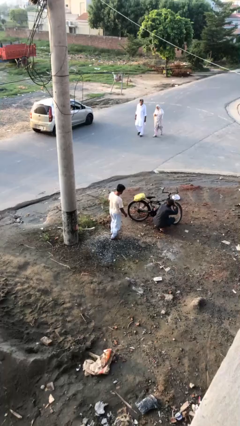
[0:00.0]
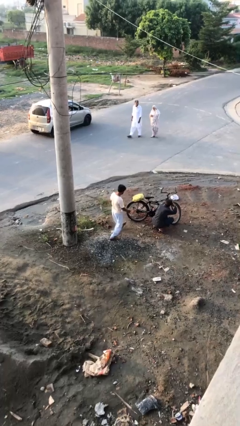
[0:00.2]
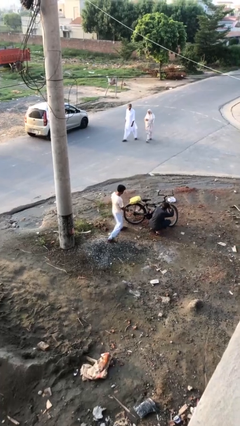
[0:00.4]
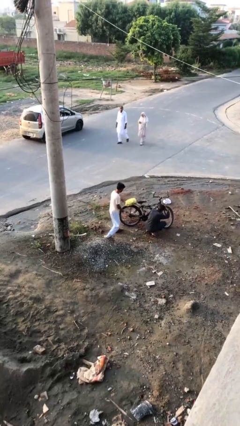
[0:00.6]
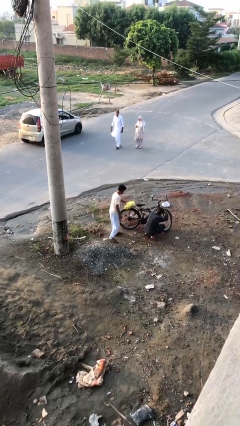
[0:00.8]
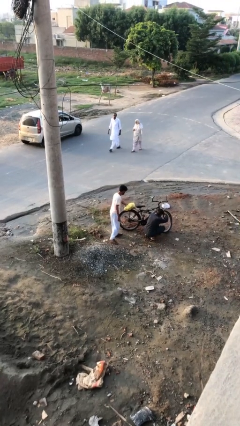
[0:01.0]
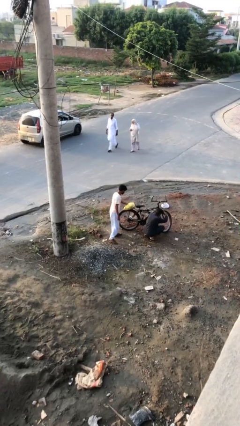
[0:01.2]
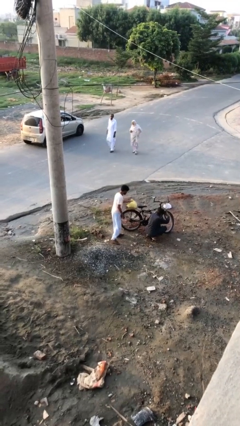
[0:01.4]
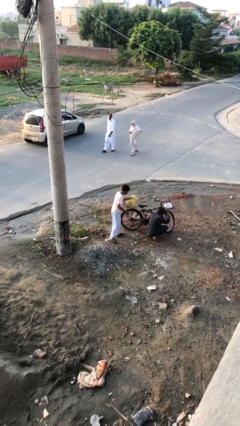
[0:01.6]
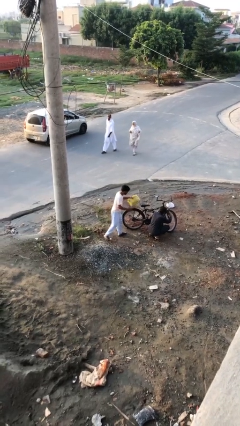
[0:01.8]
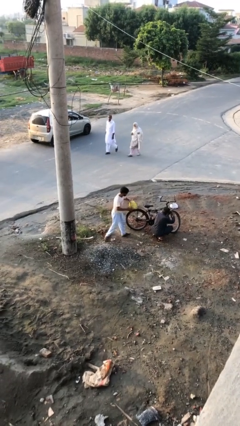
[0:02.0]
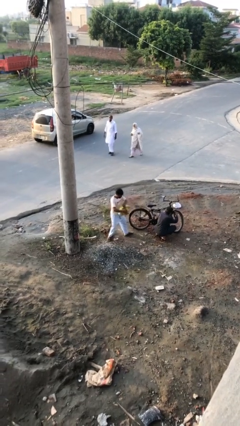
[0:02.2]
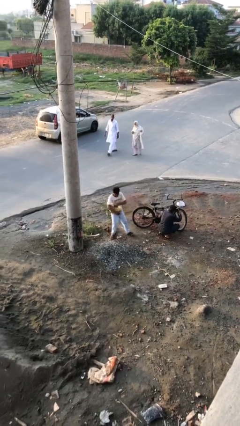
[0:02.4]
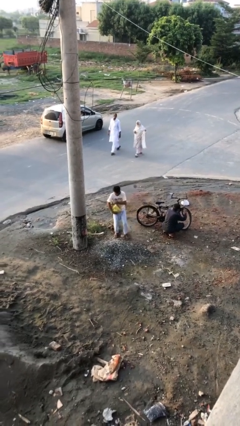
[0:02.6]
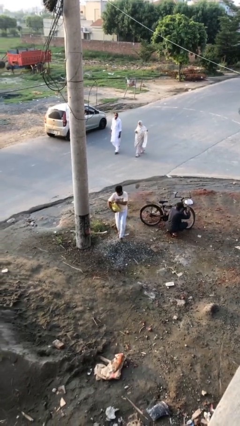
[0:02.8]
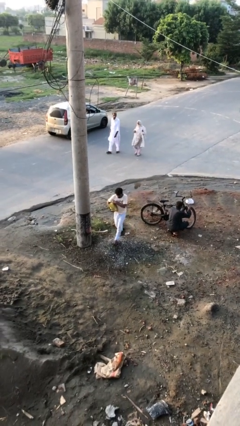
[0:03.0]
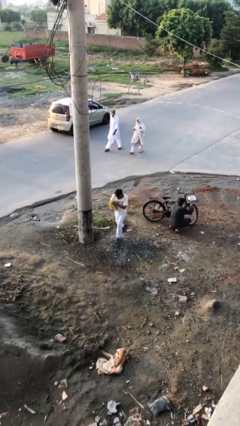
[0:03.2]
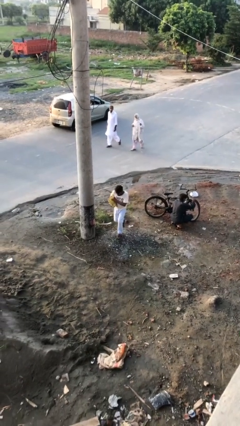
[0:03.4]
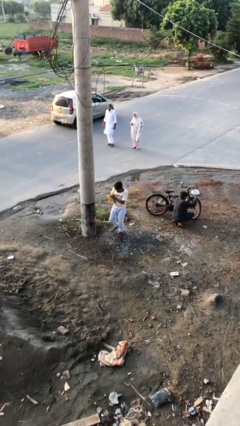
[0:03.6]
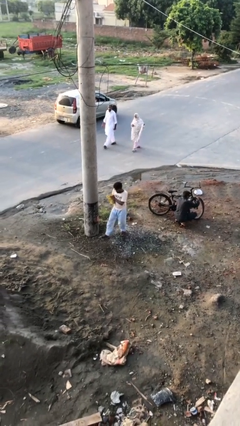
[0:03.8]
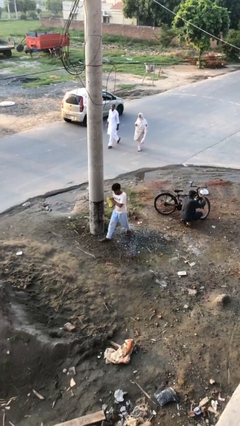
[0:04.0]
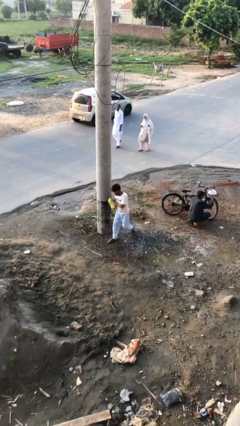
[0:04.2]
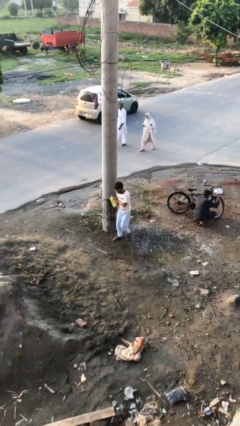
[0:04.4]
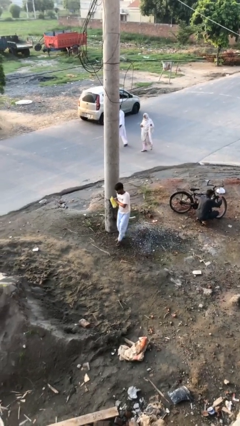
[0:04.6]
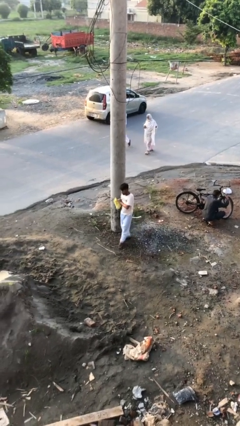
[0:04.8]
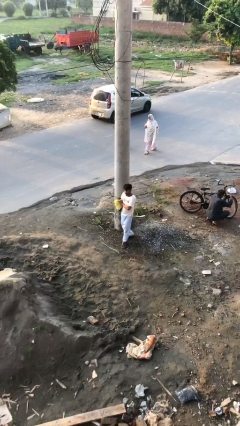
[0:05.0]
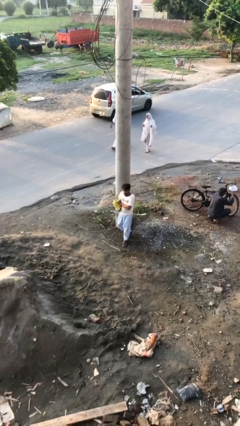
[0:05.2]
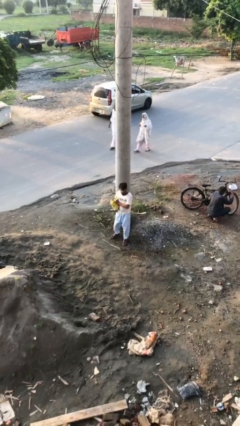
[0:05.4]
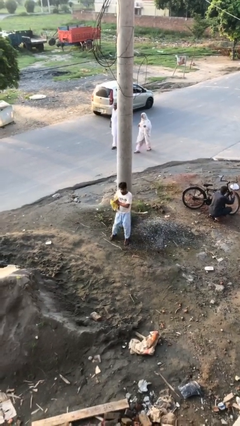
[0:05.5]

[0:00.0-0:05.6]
person steals object from person

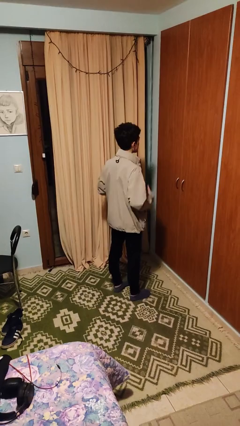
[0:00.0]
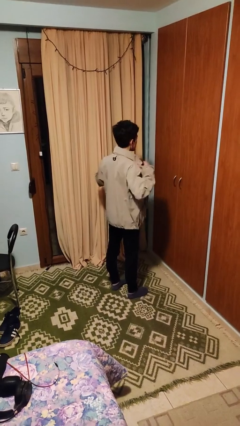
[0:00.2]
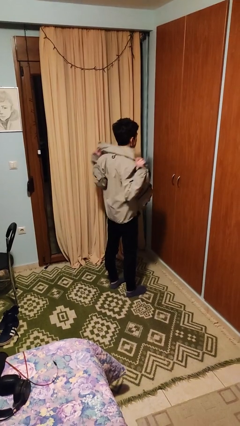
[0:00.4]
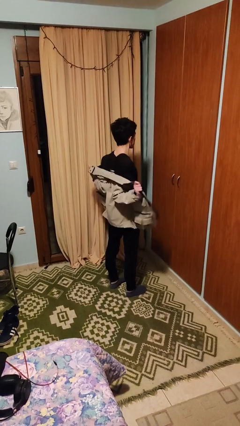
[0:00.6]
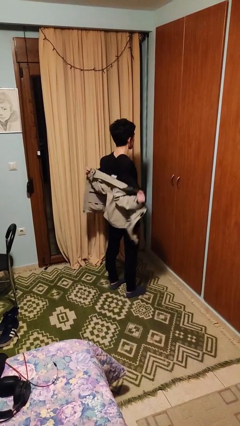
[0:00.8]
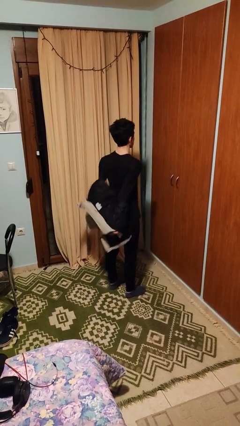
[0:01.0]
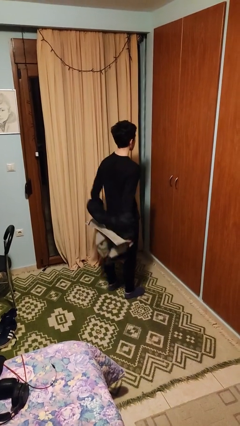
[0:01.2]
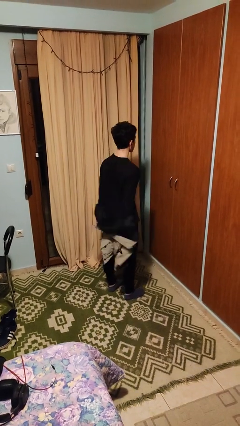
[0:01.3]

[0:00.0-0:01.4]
person takes off jacket

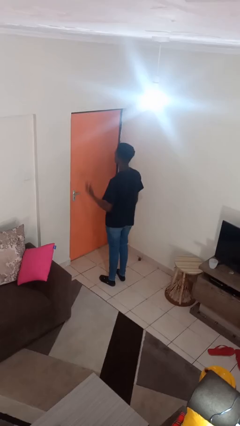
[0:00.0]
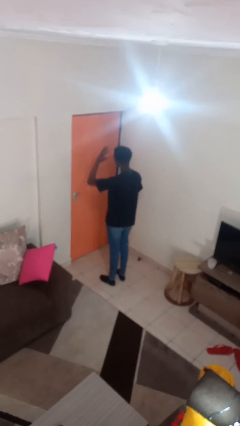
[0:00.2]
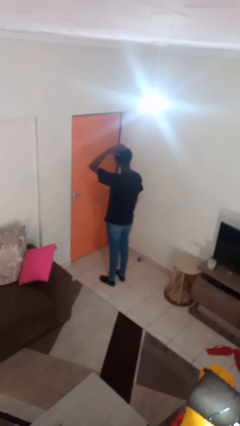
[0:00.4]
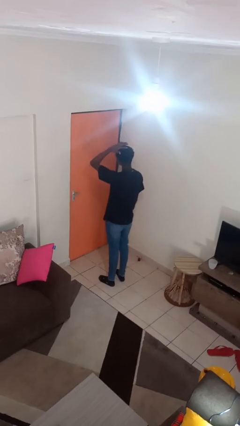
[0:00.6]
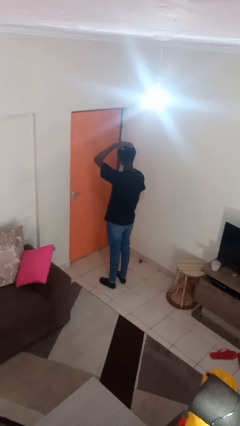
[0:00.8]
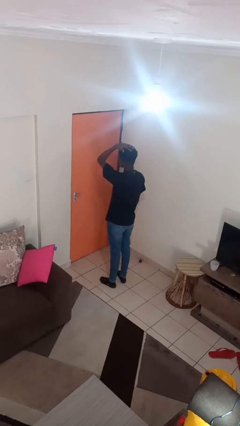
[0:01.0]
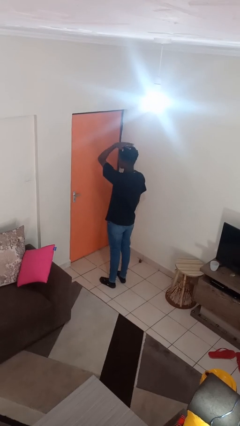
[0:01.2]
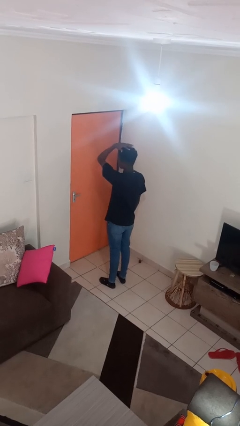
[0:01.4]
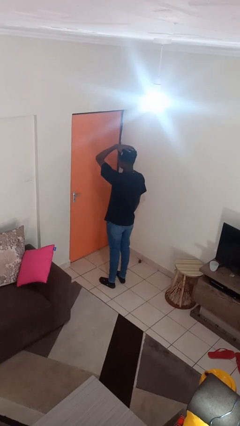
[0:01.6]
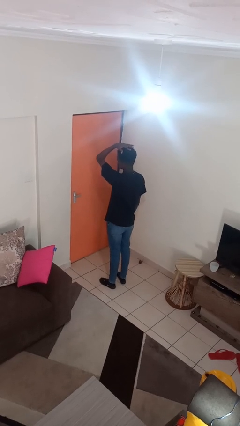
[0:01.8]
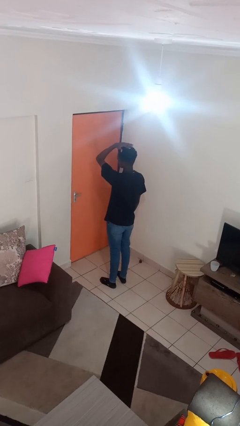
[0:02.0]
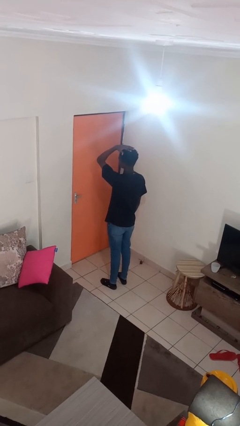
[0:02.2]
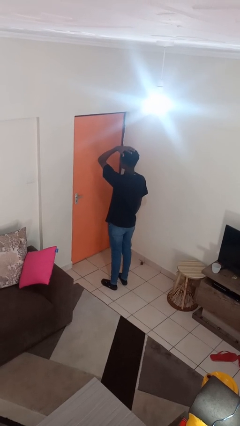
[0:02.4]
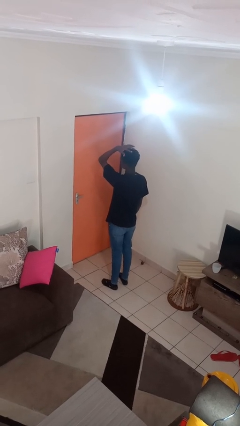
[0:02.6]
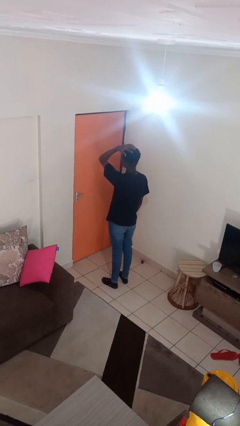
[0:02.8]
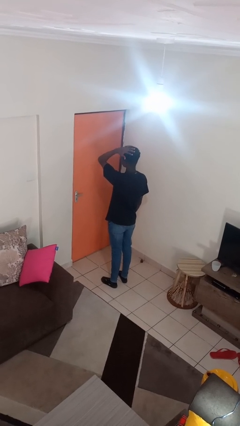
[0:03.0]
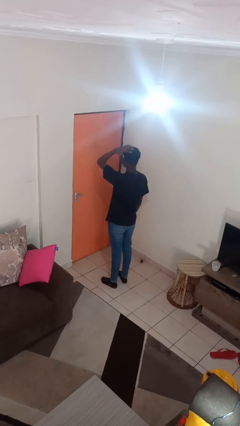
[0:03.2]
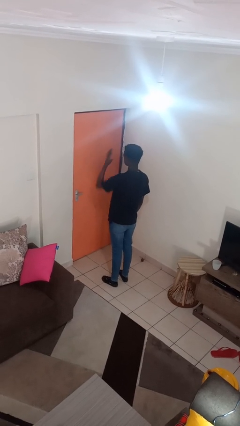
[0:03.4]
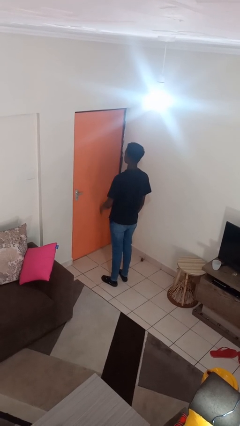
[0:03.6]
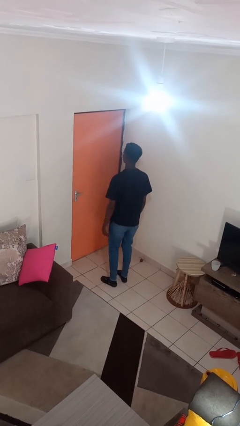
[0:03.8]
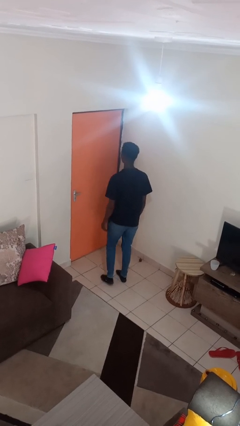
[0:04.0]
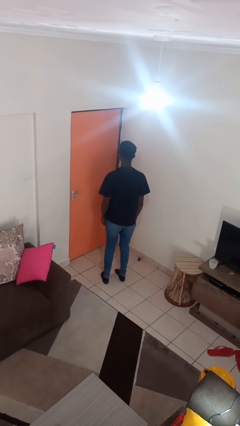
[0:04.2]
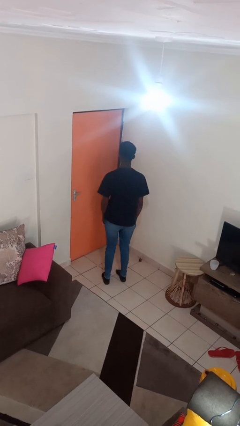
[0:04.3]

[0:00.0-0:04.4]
person pats head

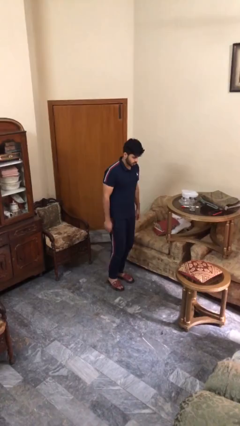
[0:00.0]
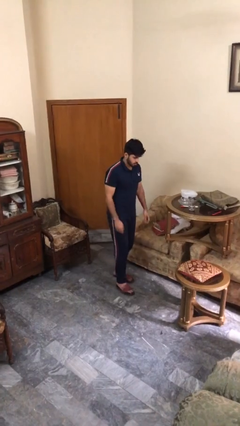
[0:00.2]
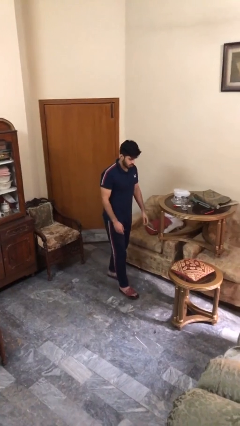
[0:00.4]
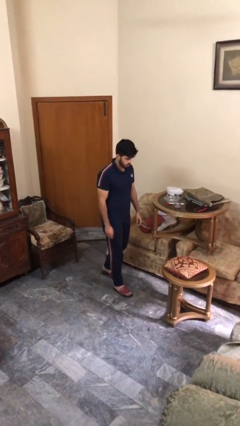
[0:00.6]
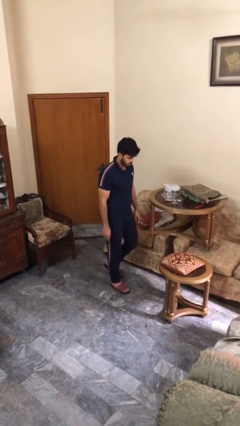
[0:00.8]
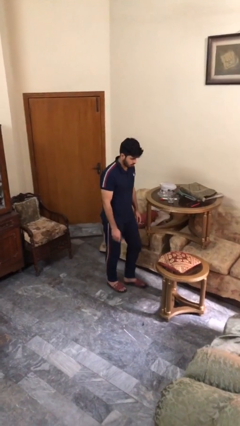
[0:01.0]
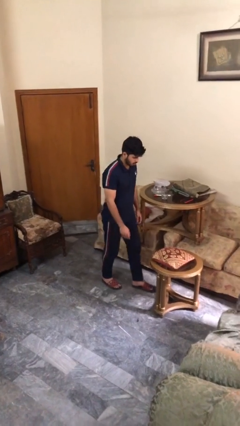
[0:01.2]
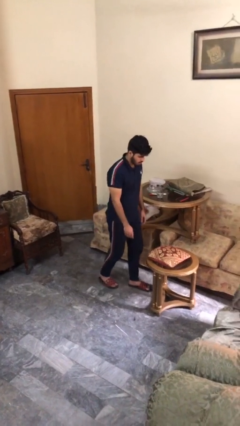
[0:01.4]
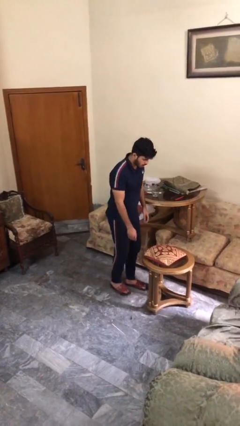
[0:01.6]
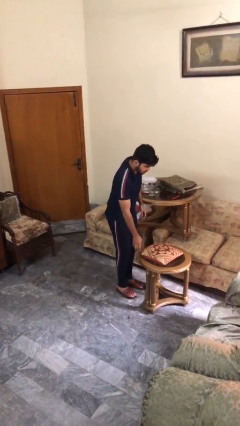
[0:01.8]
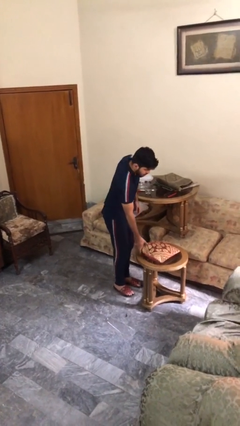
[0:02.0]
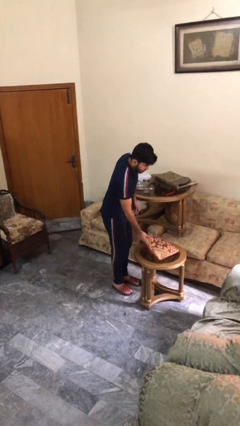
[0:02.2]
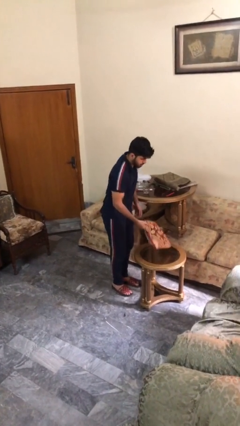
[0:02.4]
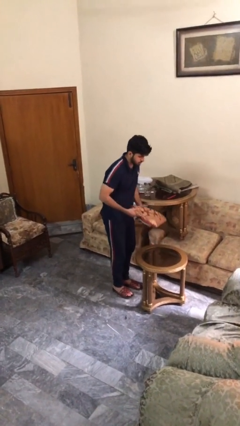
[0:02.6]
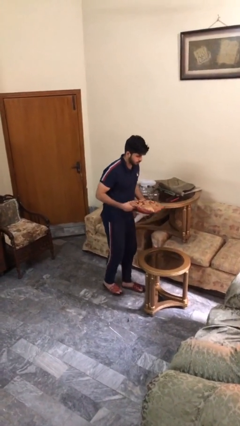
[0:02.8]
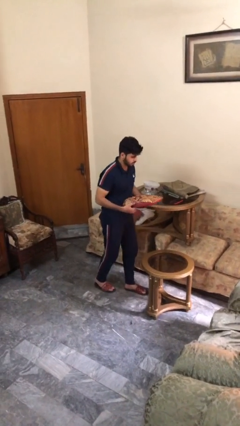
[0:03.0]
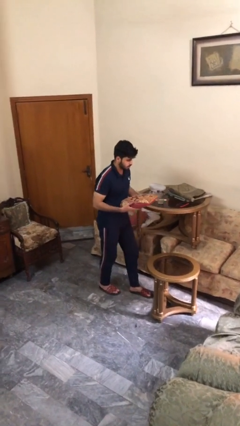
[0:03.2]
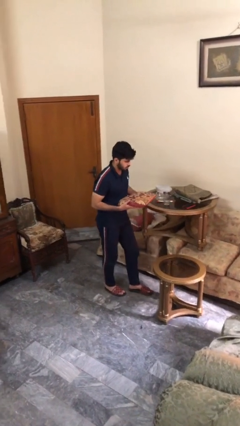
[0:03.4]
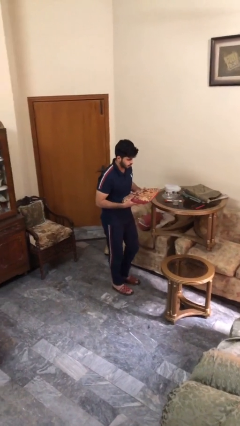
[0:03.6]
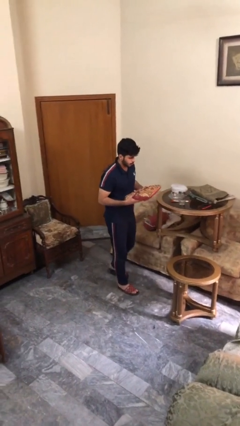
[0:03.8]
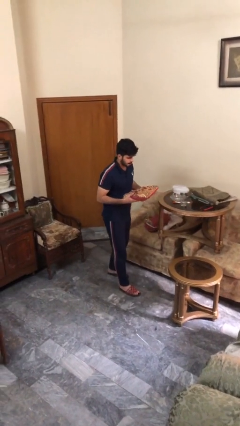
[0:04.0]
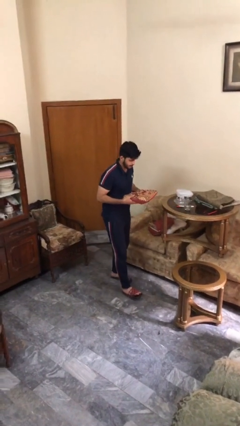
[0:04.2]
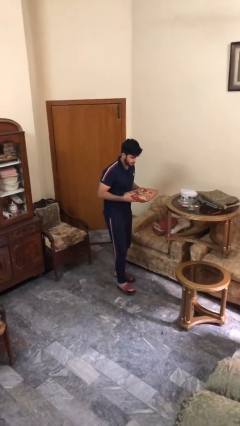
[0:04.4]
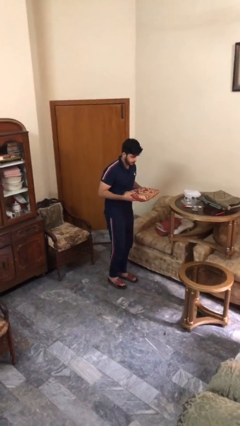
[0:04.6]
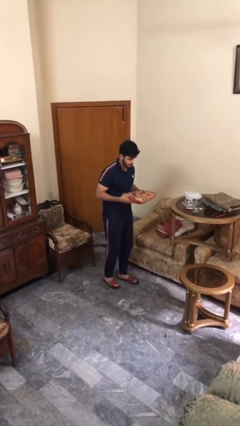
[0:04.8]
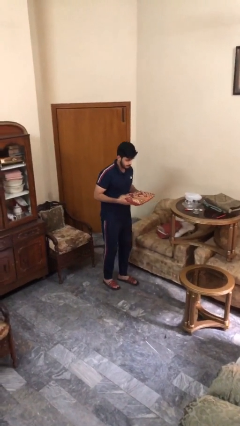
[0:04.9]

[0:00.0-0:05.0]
person picks up object from table

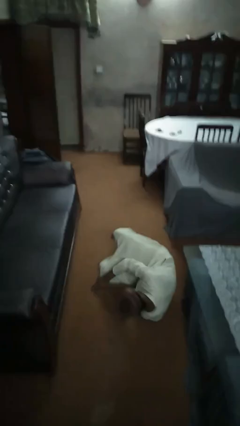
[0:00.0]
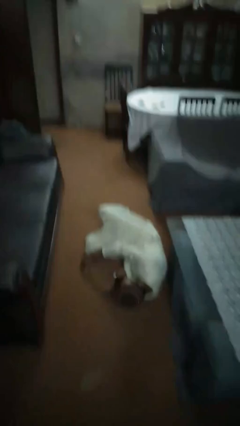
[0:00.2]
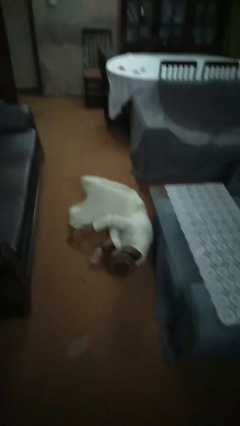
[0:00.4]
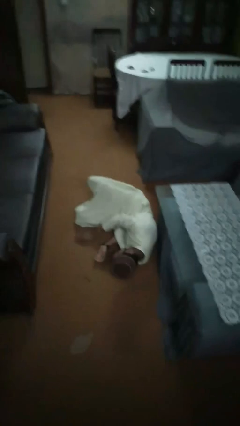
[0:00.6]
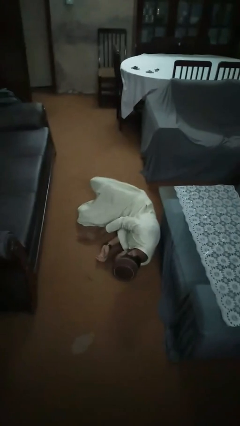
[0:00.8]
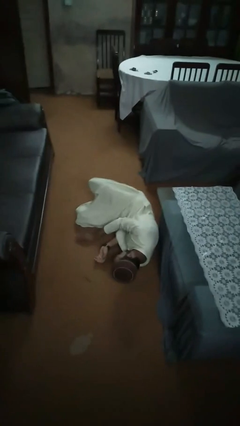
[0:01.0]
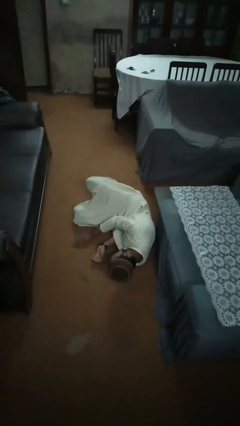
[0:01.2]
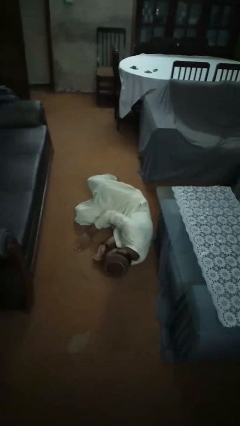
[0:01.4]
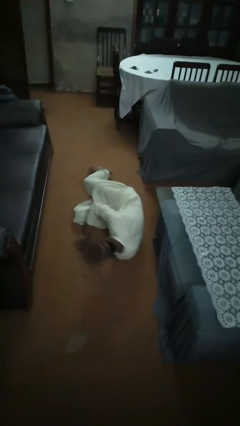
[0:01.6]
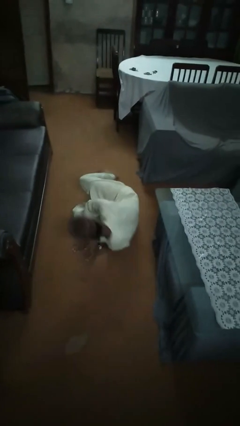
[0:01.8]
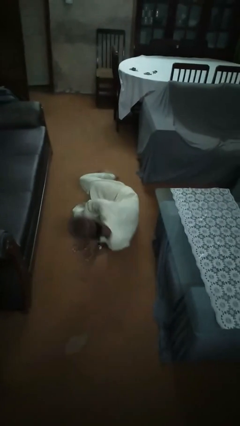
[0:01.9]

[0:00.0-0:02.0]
person lies down on floor
